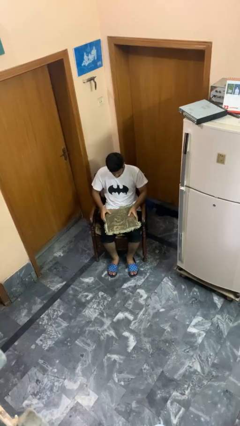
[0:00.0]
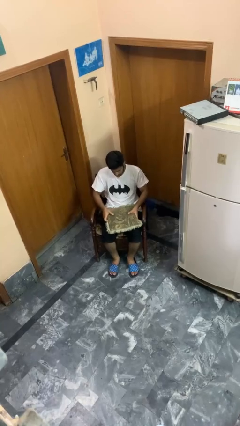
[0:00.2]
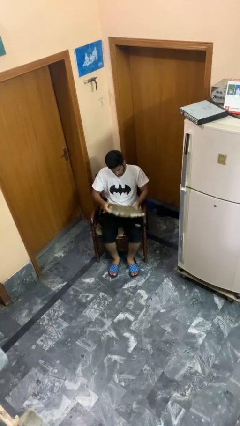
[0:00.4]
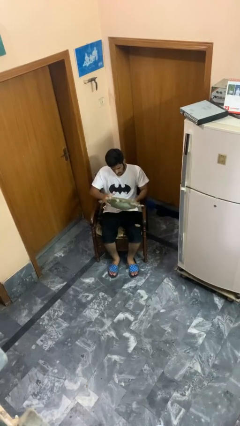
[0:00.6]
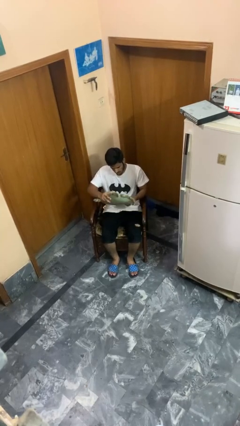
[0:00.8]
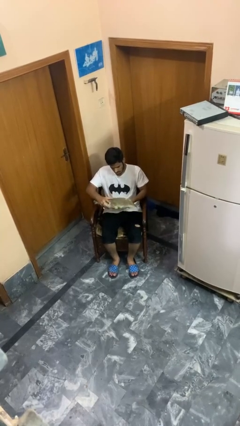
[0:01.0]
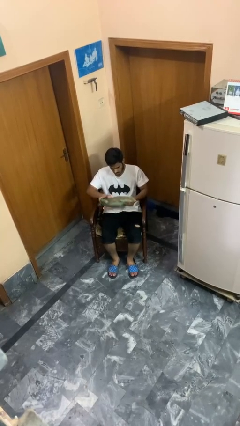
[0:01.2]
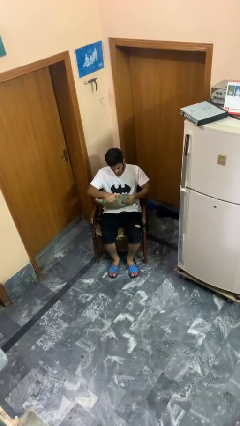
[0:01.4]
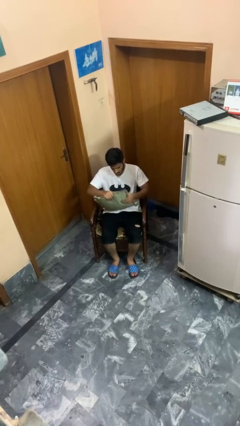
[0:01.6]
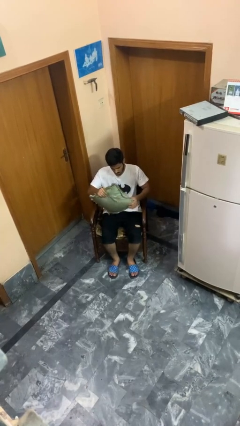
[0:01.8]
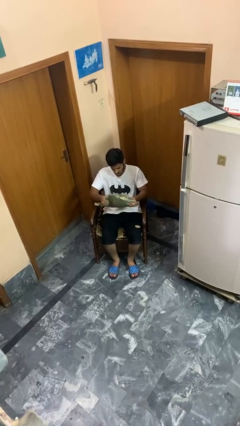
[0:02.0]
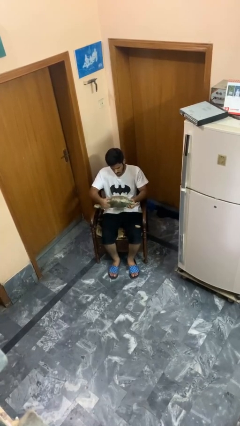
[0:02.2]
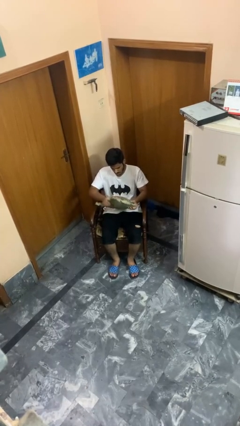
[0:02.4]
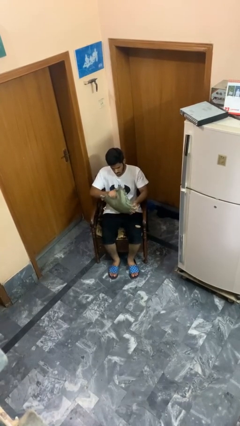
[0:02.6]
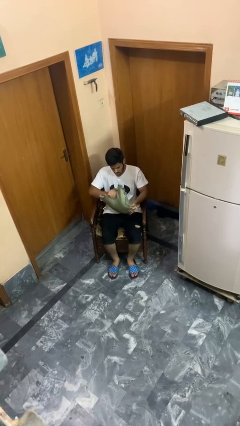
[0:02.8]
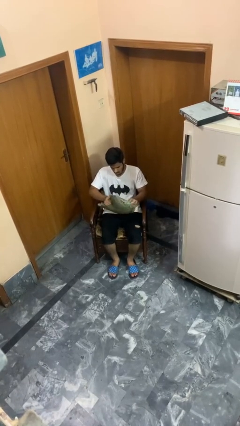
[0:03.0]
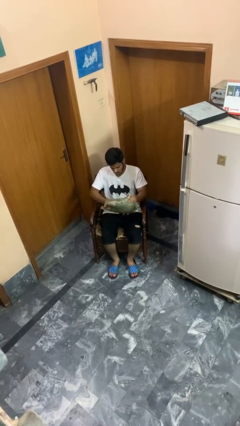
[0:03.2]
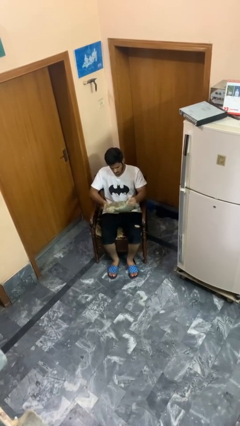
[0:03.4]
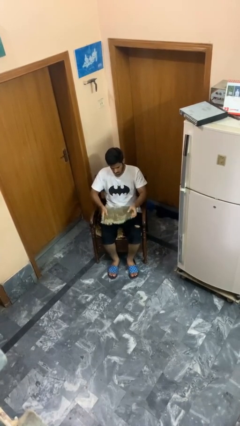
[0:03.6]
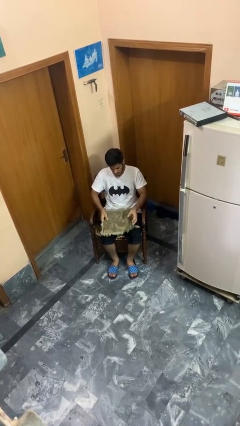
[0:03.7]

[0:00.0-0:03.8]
person squeezes object

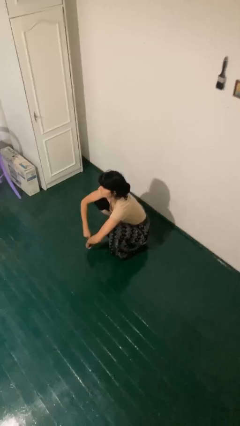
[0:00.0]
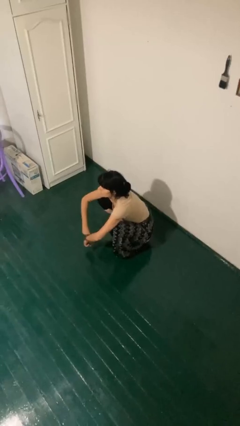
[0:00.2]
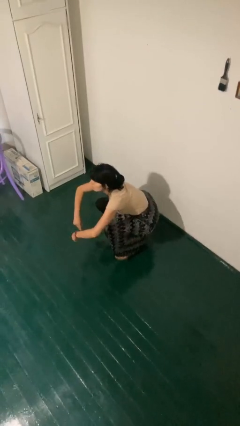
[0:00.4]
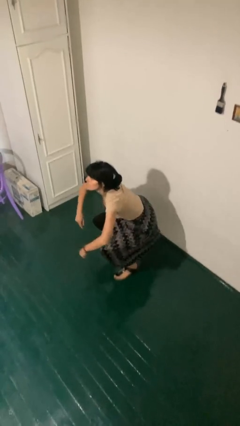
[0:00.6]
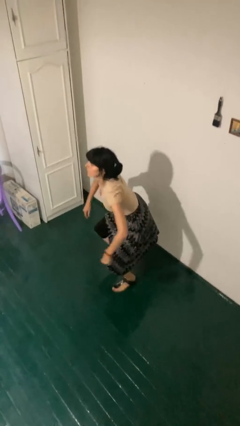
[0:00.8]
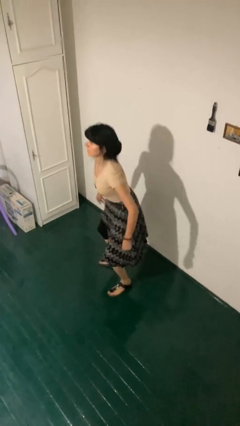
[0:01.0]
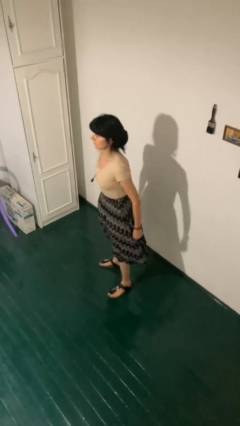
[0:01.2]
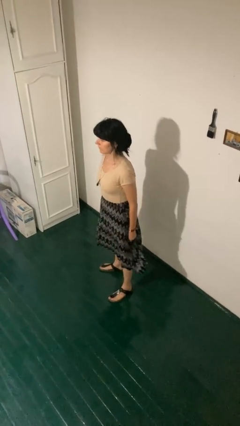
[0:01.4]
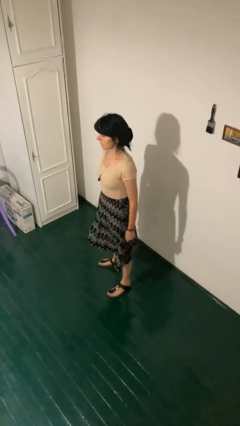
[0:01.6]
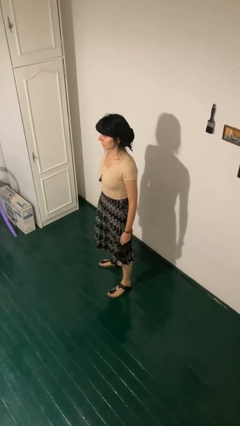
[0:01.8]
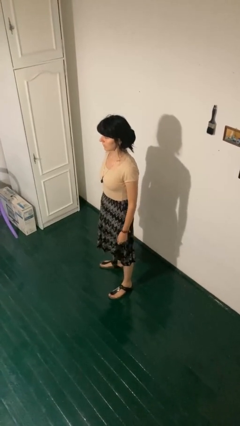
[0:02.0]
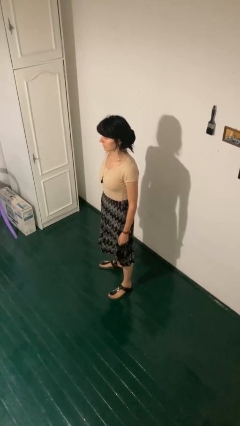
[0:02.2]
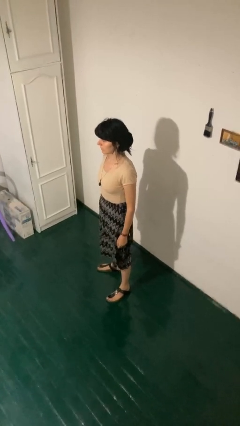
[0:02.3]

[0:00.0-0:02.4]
person stands up

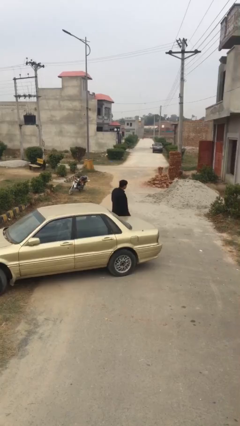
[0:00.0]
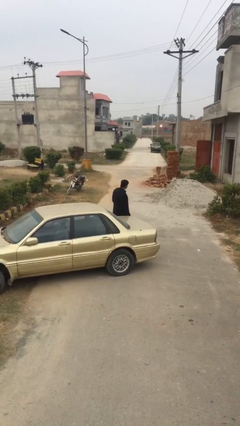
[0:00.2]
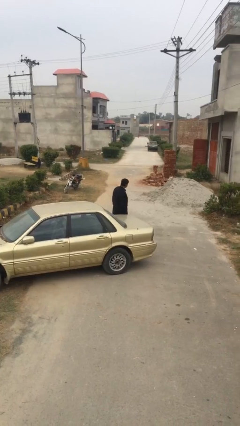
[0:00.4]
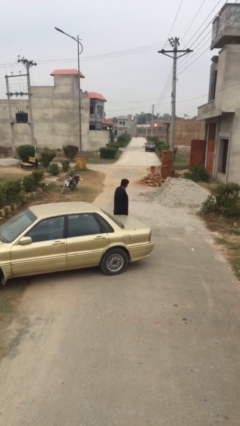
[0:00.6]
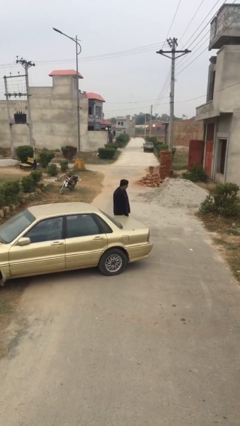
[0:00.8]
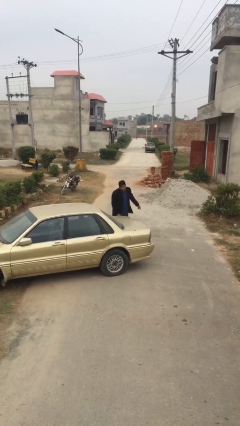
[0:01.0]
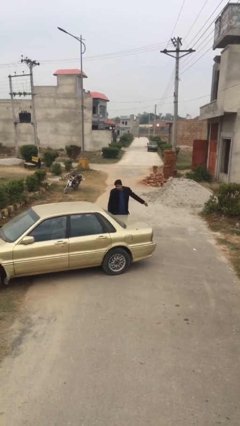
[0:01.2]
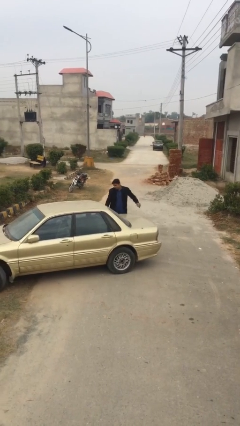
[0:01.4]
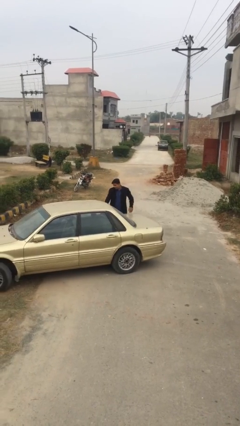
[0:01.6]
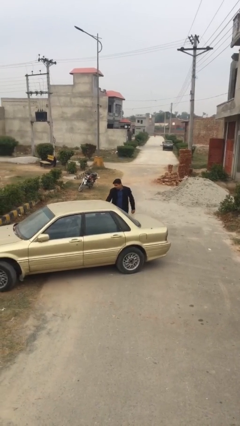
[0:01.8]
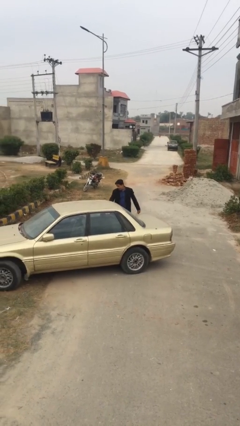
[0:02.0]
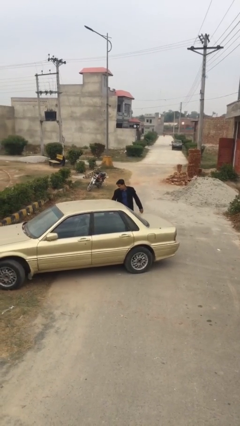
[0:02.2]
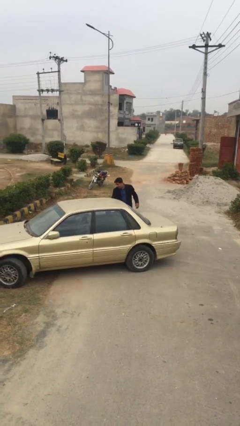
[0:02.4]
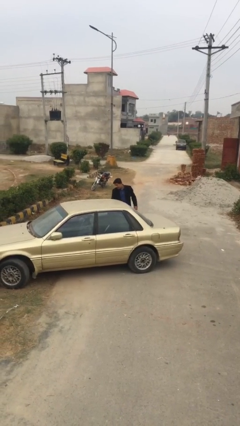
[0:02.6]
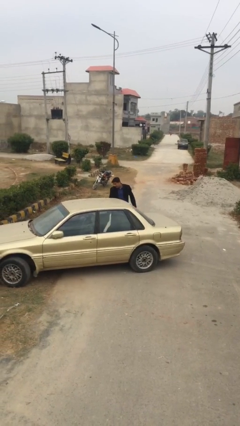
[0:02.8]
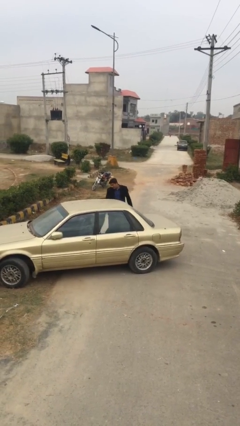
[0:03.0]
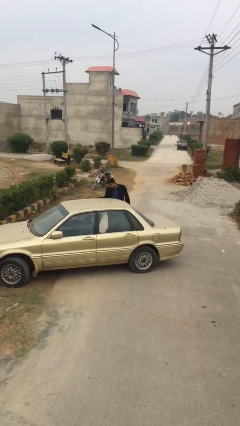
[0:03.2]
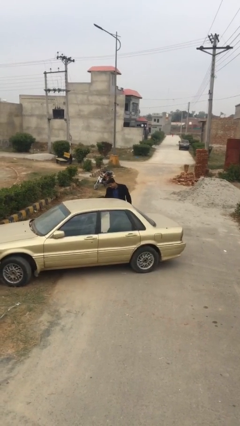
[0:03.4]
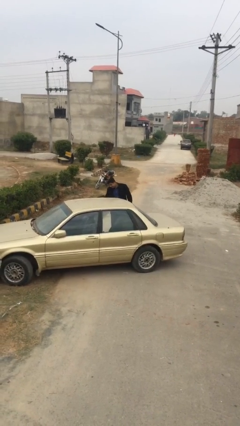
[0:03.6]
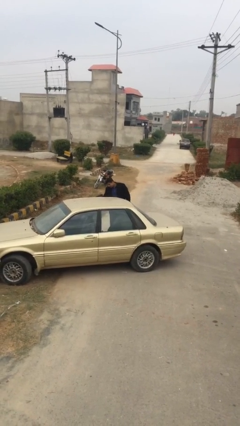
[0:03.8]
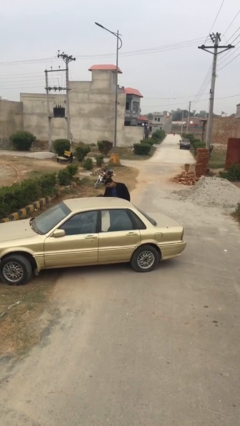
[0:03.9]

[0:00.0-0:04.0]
person opens car door

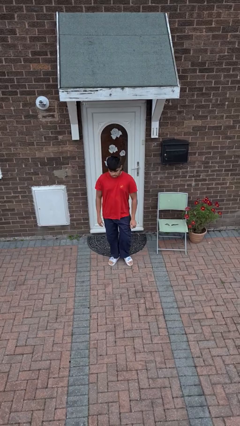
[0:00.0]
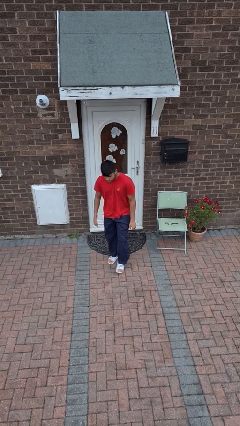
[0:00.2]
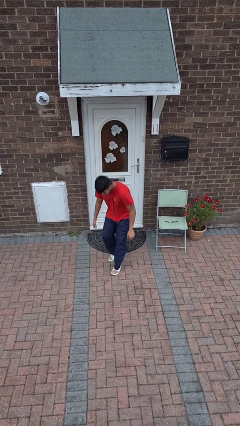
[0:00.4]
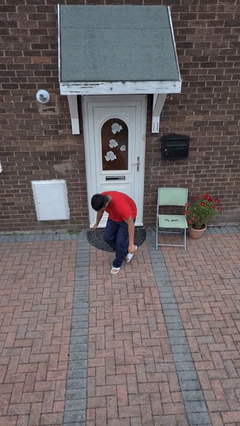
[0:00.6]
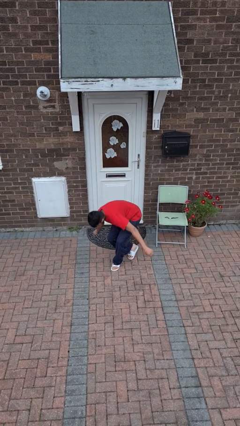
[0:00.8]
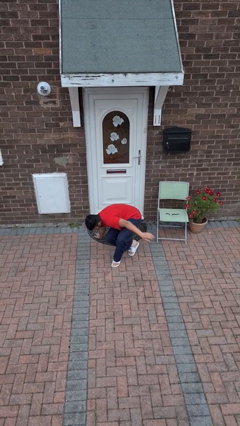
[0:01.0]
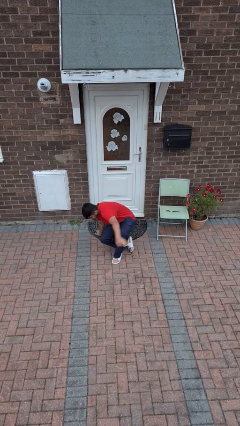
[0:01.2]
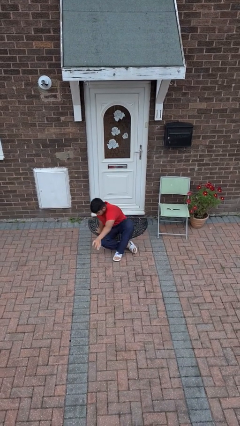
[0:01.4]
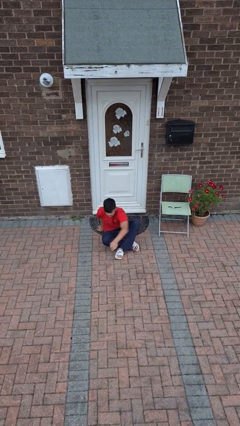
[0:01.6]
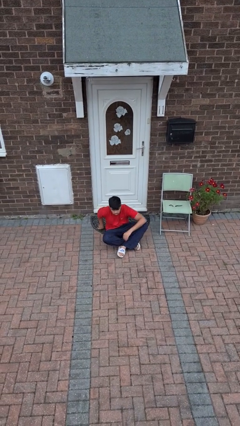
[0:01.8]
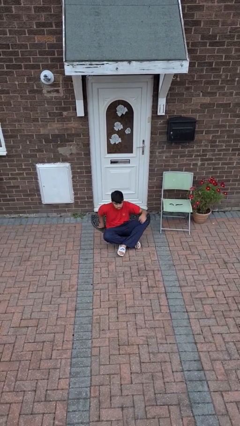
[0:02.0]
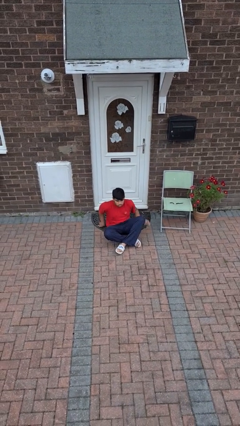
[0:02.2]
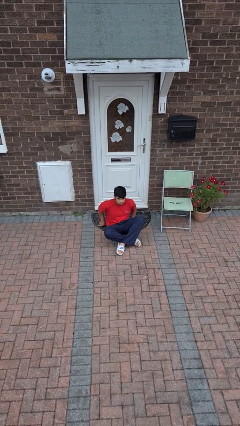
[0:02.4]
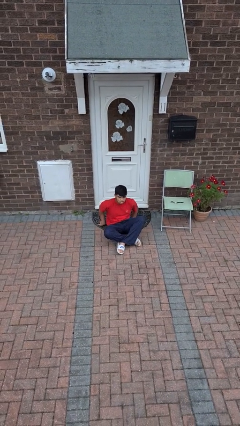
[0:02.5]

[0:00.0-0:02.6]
person sits crisscross

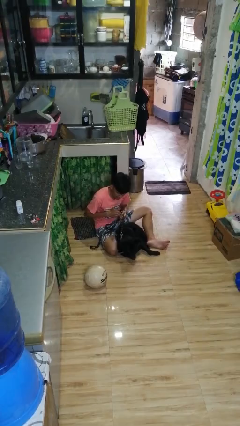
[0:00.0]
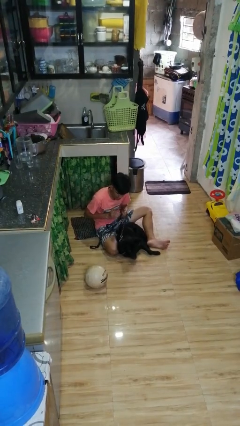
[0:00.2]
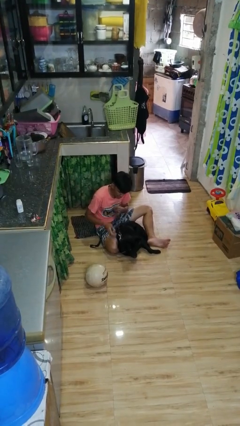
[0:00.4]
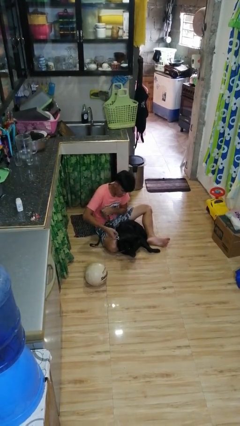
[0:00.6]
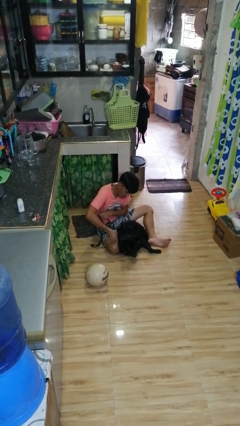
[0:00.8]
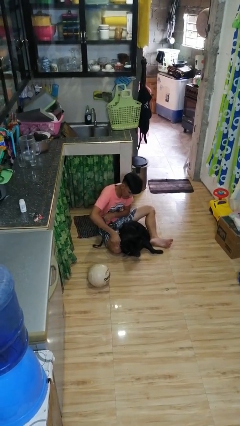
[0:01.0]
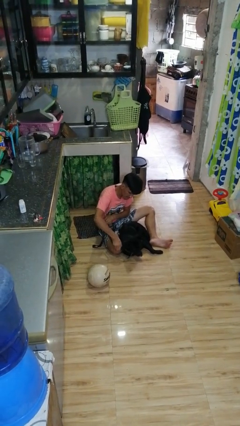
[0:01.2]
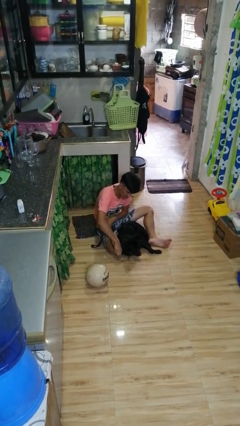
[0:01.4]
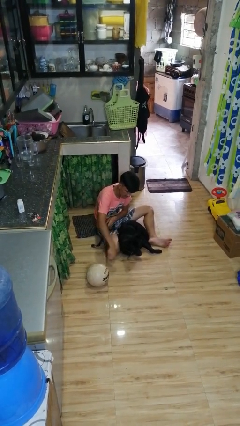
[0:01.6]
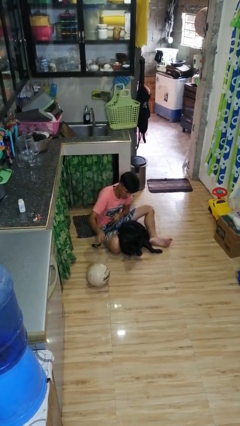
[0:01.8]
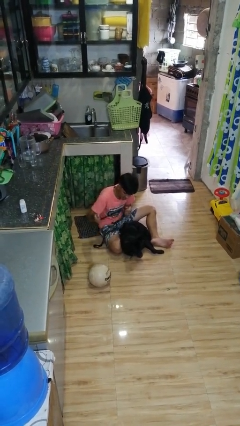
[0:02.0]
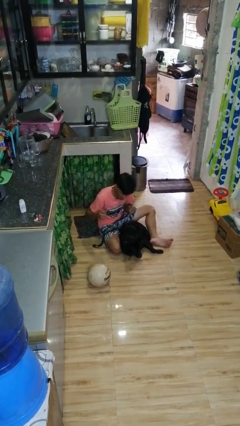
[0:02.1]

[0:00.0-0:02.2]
person unattaches leash from dog

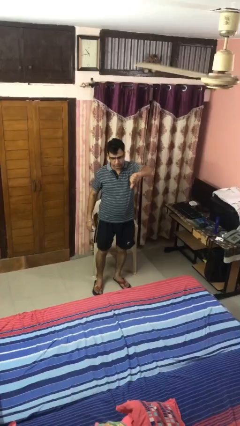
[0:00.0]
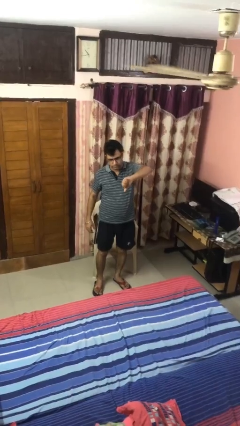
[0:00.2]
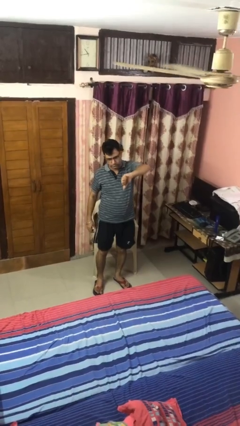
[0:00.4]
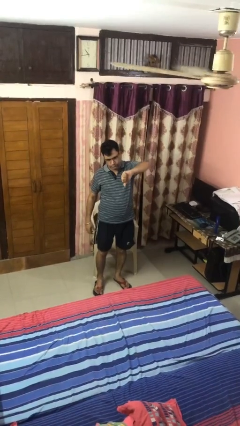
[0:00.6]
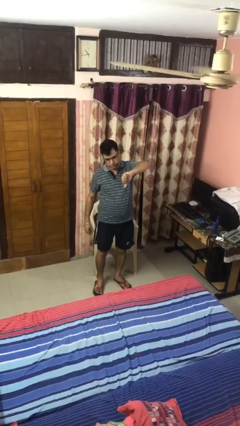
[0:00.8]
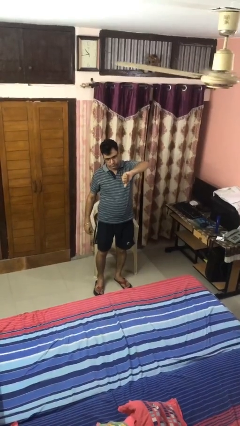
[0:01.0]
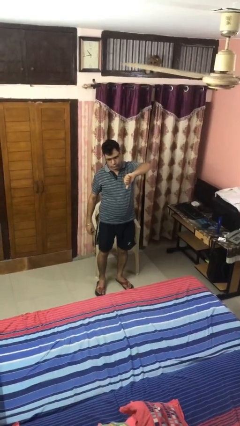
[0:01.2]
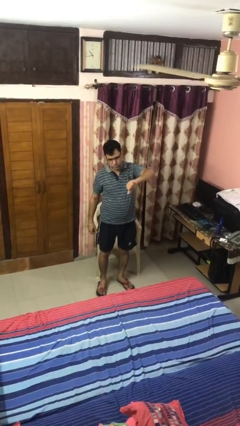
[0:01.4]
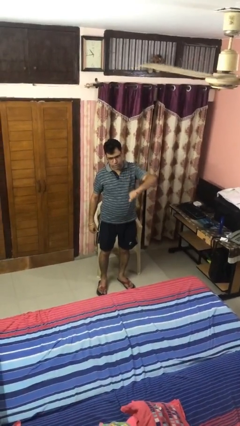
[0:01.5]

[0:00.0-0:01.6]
person gestures thumbs down

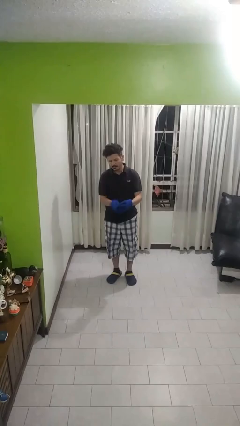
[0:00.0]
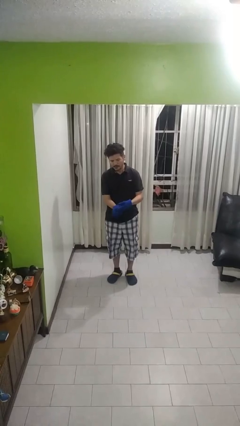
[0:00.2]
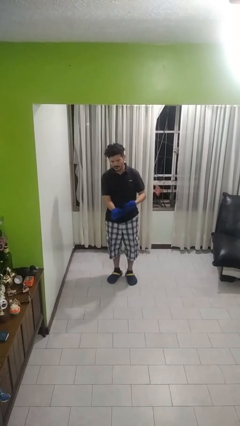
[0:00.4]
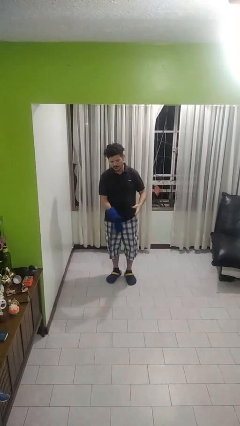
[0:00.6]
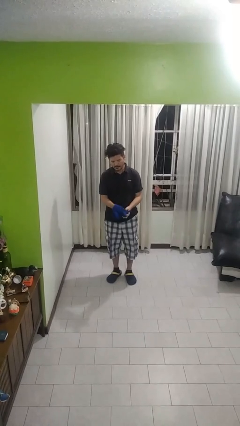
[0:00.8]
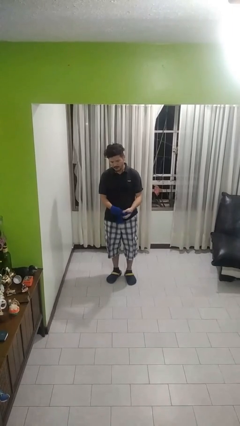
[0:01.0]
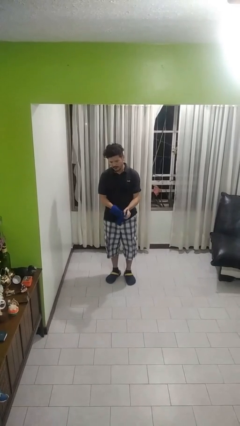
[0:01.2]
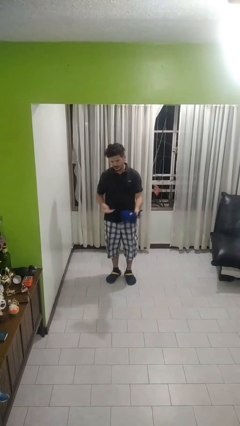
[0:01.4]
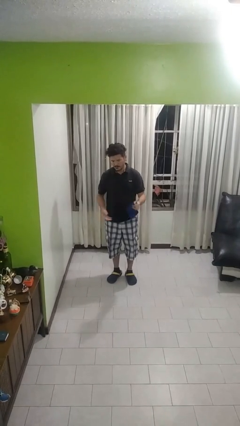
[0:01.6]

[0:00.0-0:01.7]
person takes off gloves
